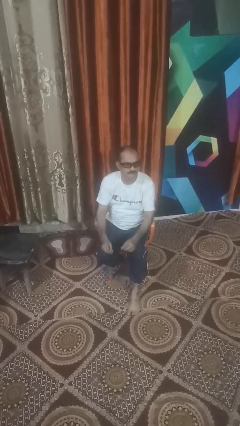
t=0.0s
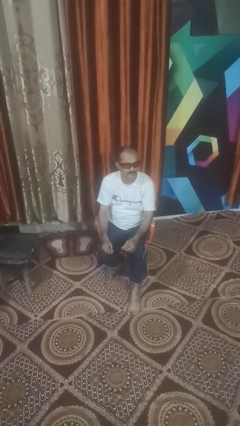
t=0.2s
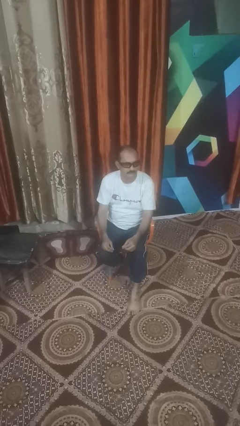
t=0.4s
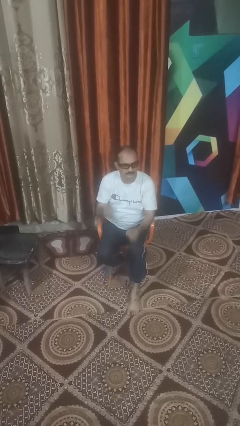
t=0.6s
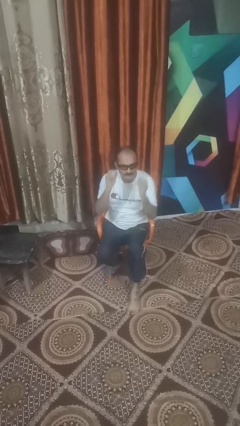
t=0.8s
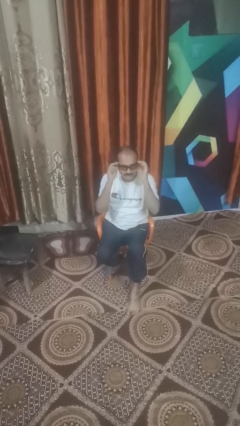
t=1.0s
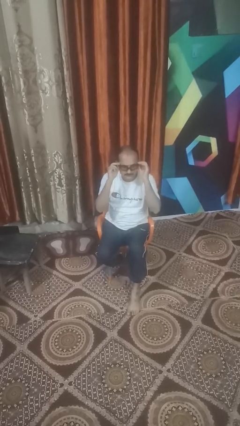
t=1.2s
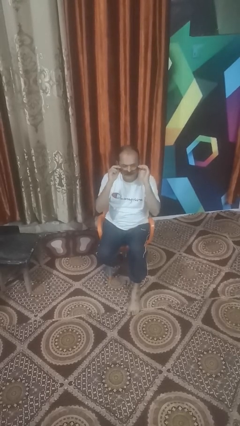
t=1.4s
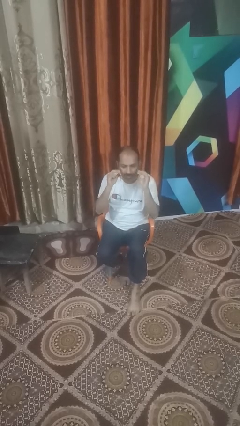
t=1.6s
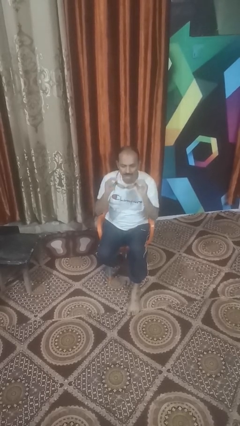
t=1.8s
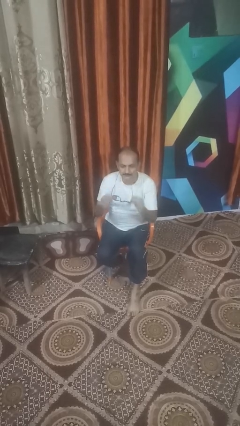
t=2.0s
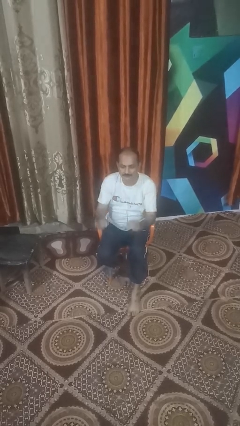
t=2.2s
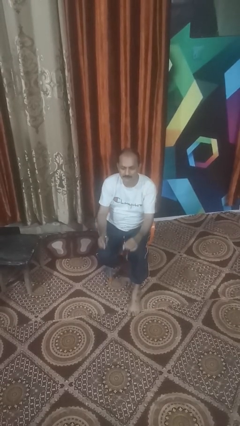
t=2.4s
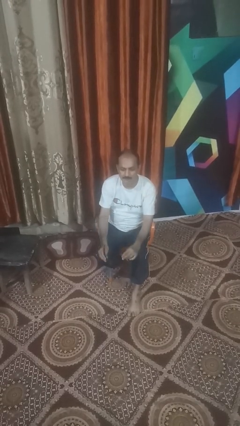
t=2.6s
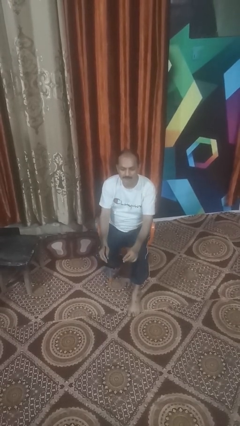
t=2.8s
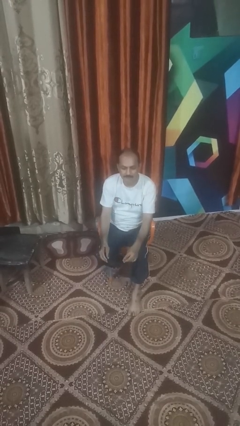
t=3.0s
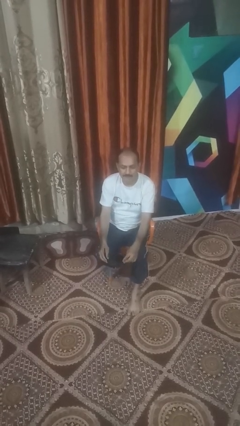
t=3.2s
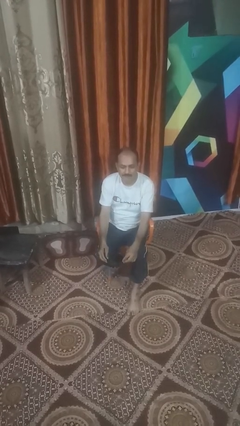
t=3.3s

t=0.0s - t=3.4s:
person takes off sunglasses

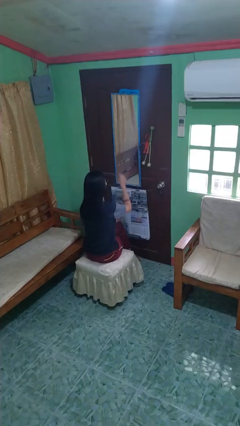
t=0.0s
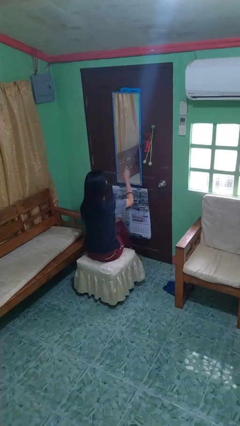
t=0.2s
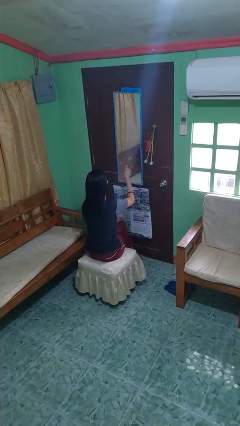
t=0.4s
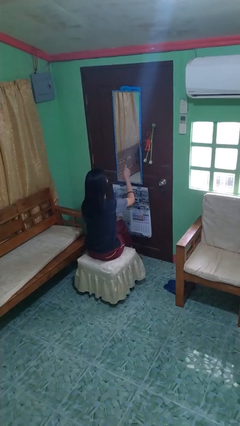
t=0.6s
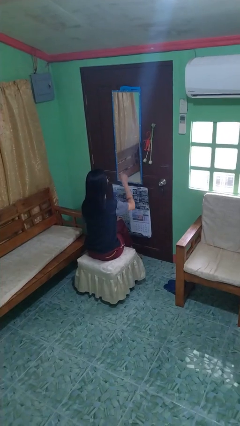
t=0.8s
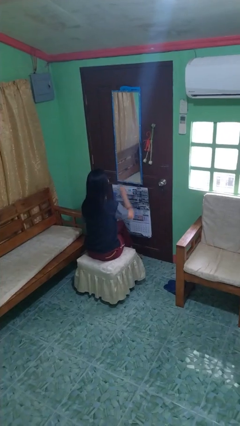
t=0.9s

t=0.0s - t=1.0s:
person gestures thumbs up

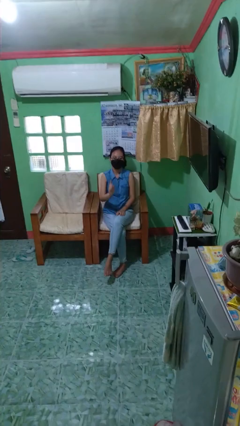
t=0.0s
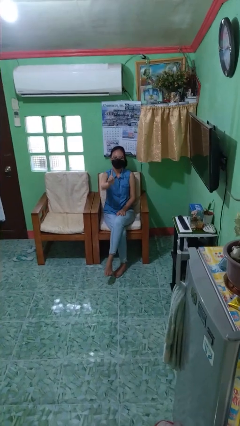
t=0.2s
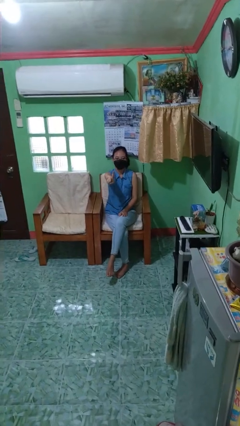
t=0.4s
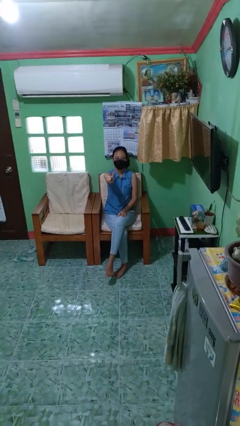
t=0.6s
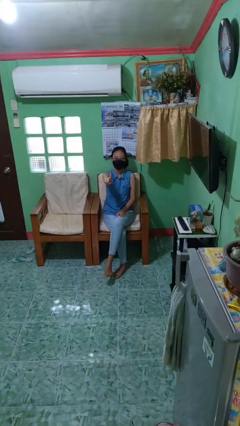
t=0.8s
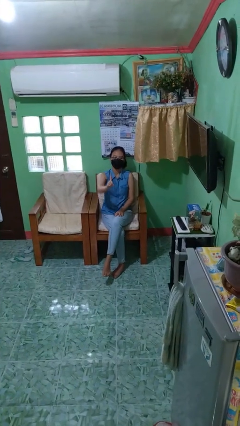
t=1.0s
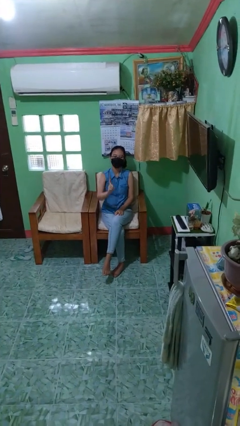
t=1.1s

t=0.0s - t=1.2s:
person gestures number one

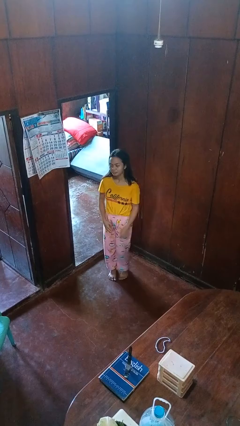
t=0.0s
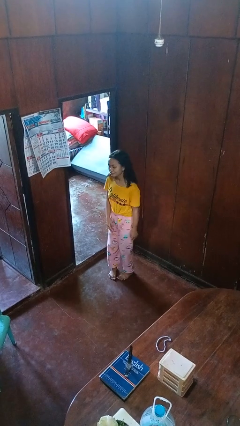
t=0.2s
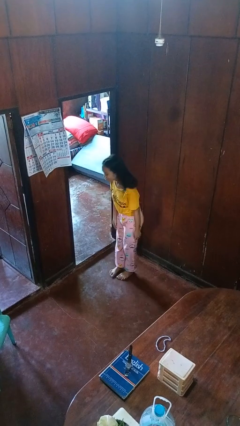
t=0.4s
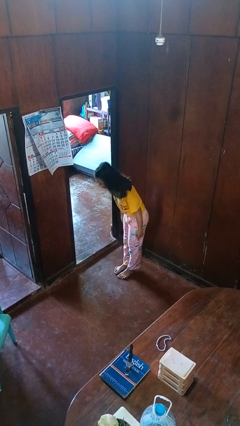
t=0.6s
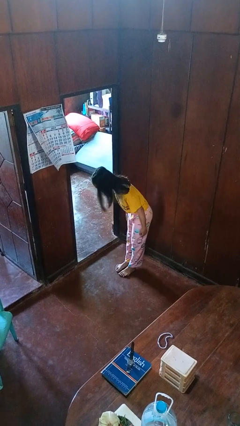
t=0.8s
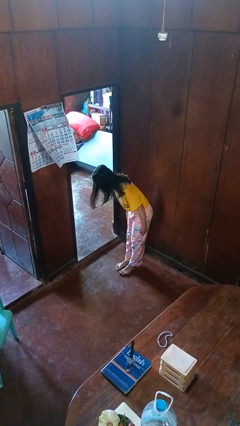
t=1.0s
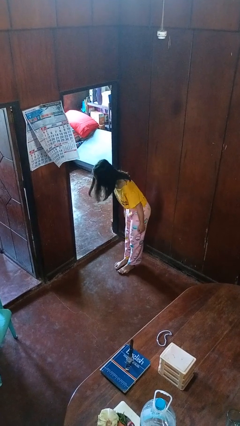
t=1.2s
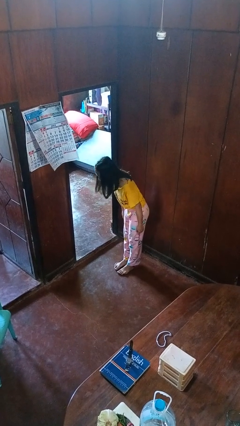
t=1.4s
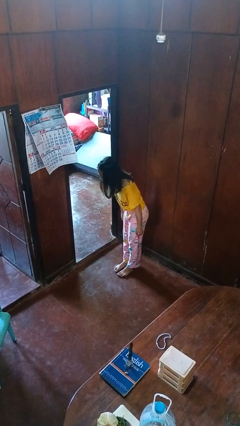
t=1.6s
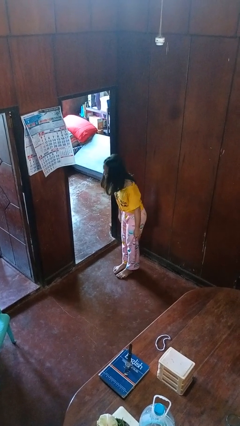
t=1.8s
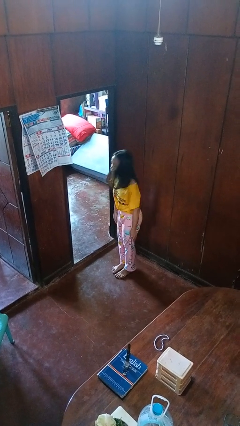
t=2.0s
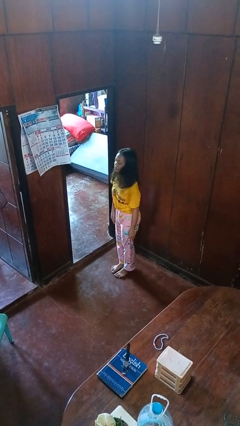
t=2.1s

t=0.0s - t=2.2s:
person bows

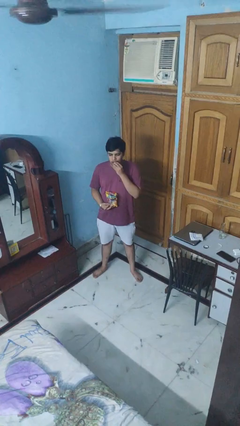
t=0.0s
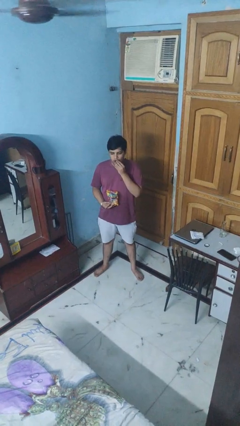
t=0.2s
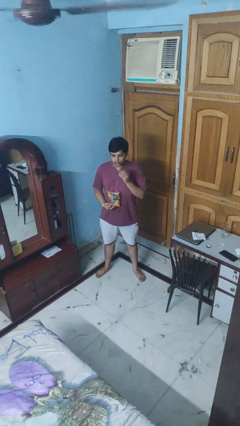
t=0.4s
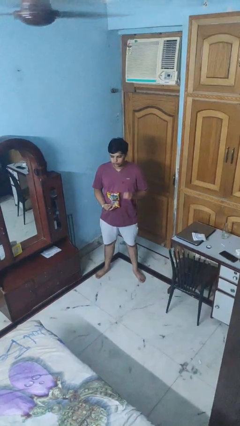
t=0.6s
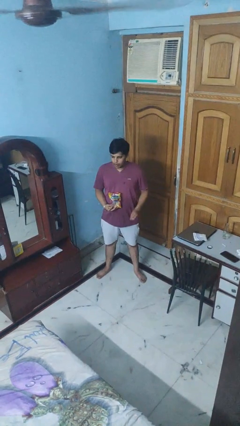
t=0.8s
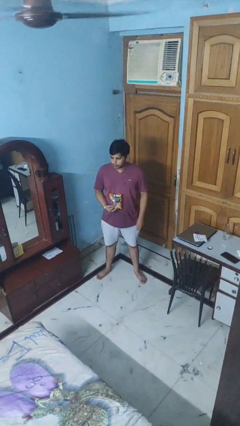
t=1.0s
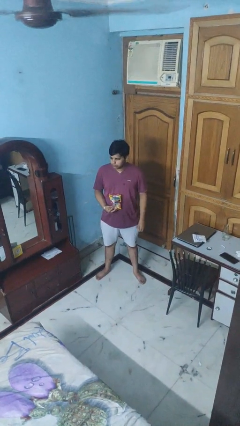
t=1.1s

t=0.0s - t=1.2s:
person eats snack from bag

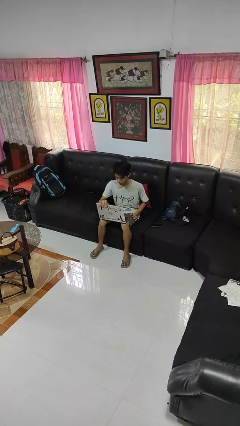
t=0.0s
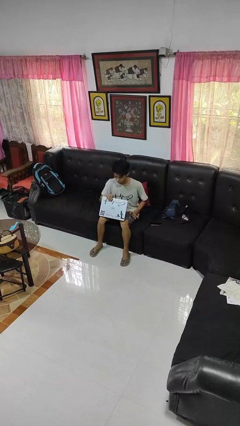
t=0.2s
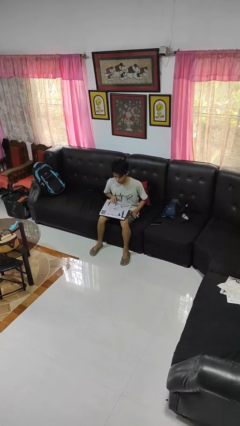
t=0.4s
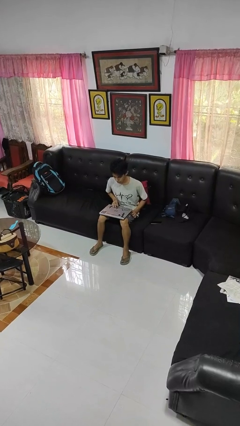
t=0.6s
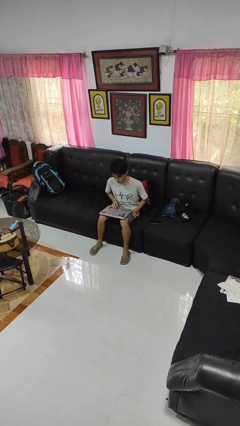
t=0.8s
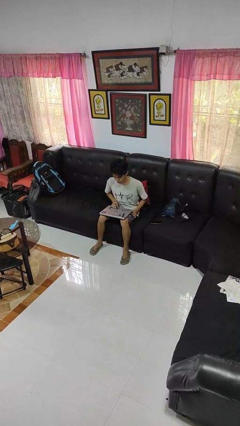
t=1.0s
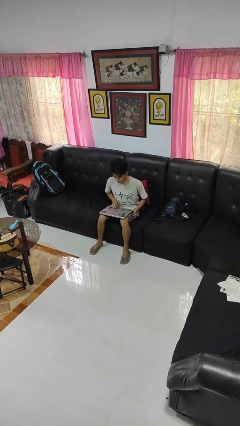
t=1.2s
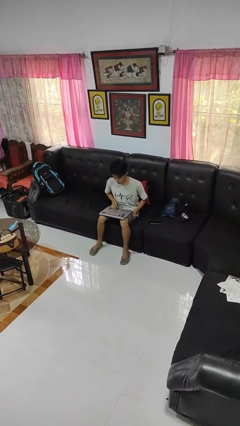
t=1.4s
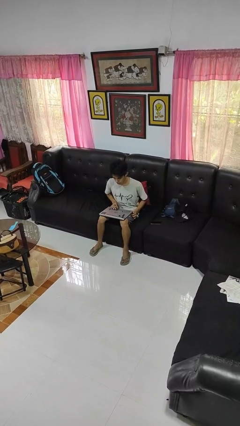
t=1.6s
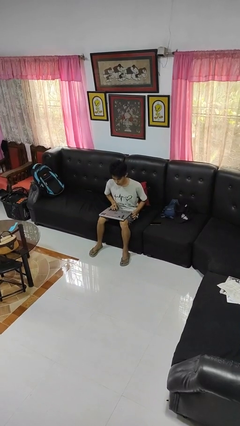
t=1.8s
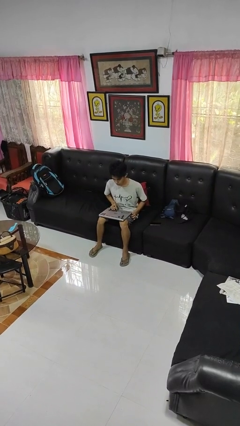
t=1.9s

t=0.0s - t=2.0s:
person closes laptop

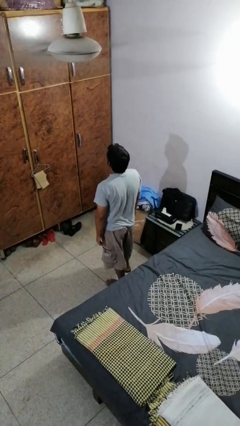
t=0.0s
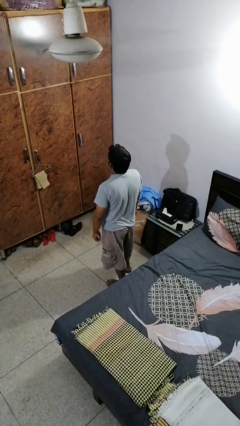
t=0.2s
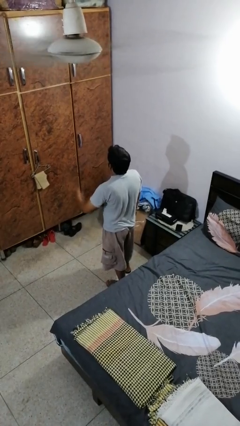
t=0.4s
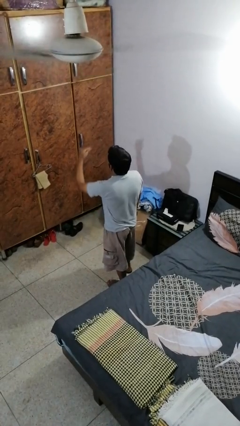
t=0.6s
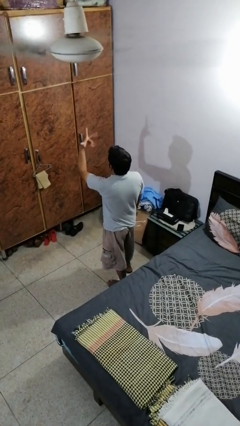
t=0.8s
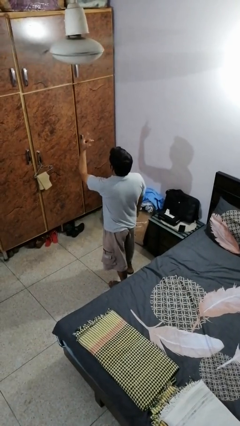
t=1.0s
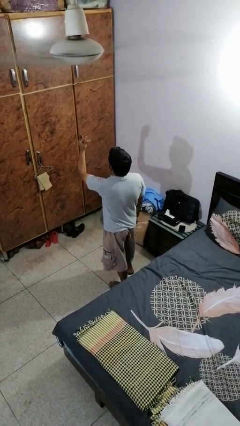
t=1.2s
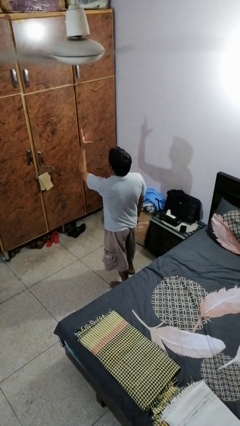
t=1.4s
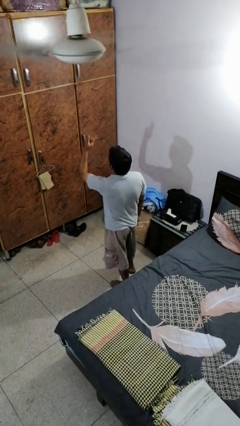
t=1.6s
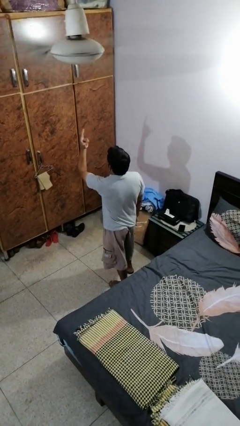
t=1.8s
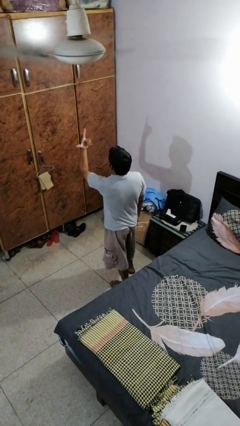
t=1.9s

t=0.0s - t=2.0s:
person snaps fingers

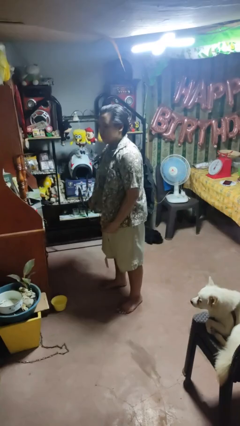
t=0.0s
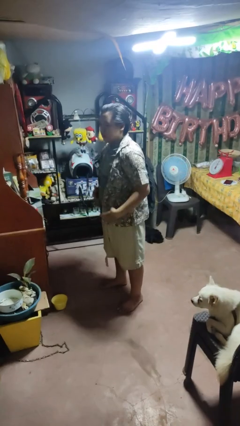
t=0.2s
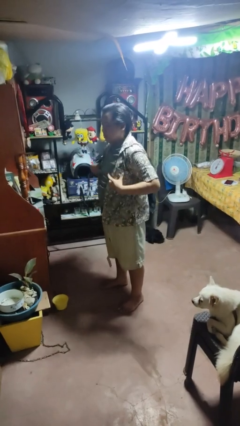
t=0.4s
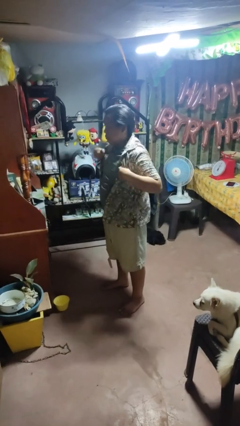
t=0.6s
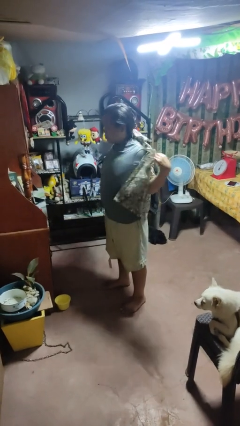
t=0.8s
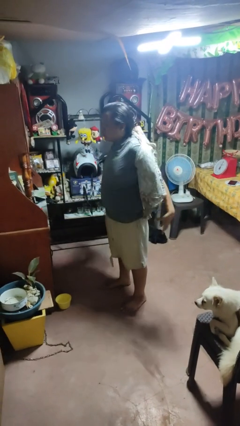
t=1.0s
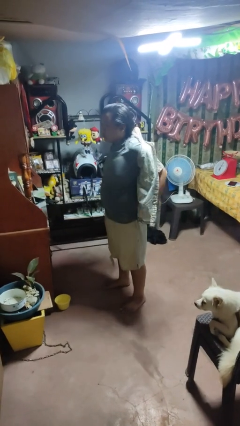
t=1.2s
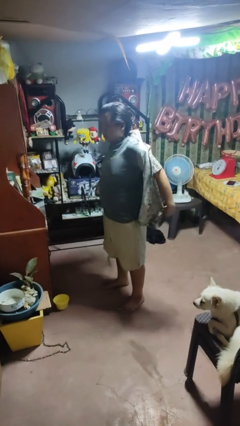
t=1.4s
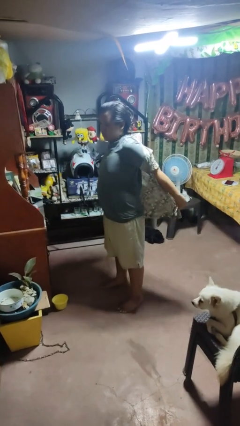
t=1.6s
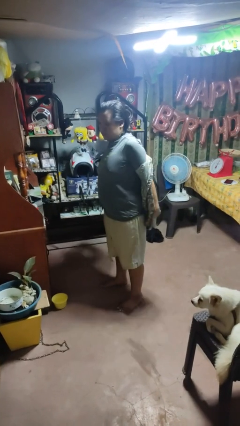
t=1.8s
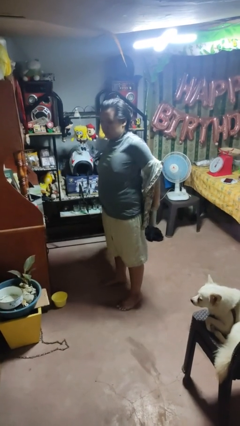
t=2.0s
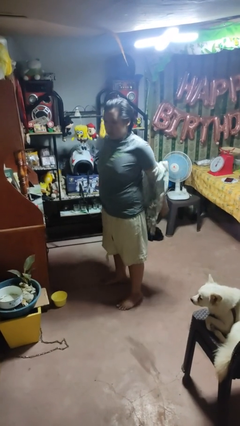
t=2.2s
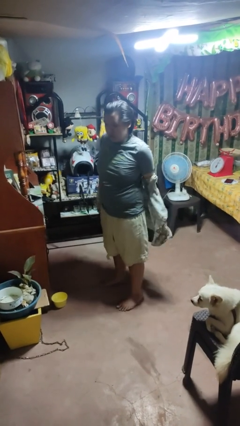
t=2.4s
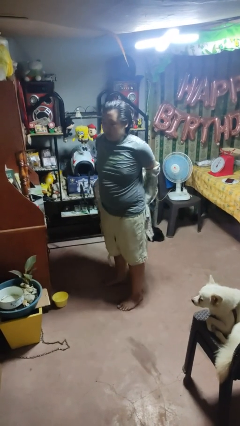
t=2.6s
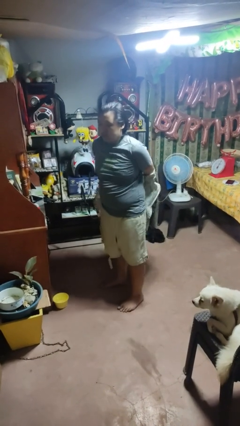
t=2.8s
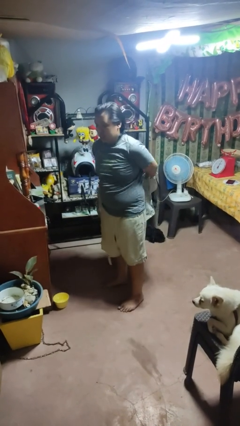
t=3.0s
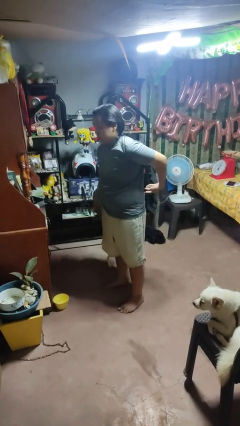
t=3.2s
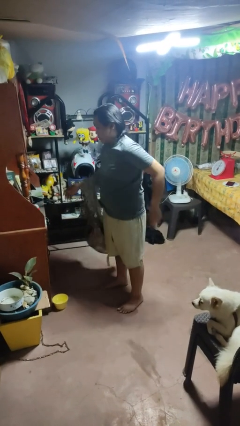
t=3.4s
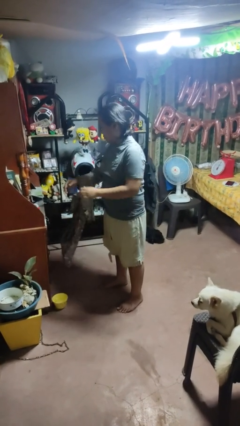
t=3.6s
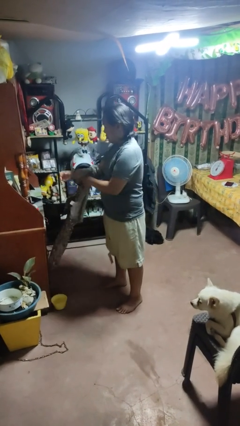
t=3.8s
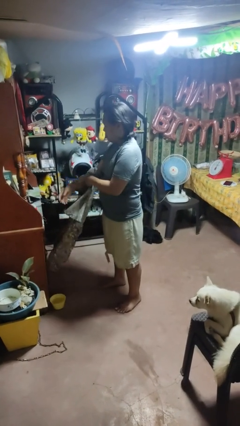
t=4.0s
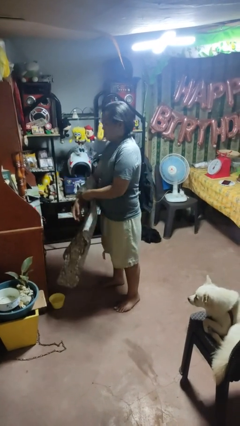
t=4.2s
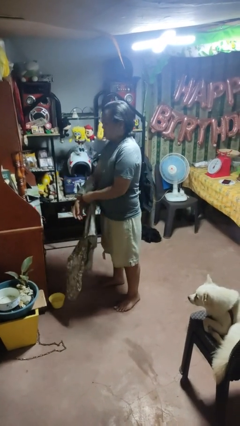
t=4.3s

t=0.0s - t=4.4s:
person takes off shirt
